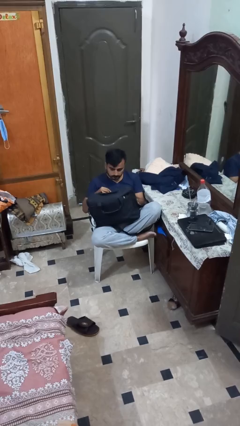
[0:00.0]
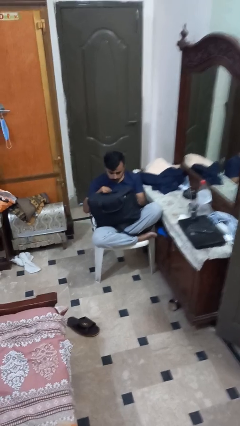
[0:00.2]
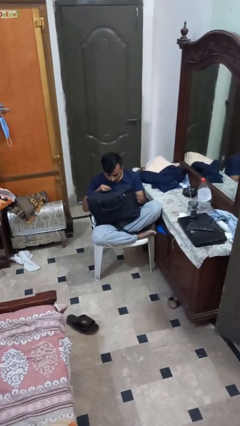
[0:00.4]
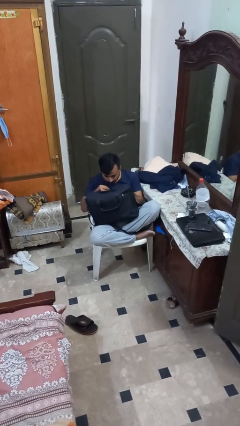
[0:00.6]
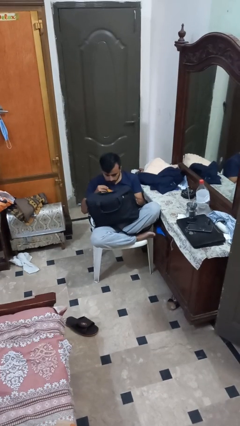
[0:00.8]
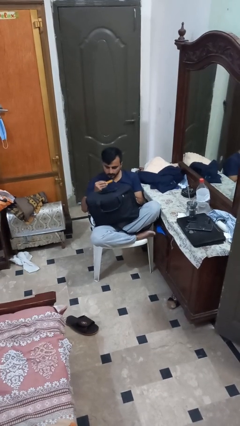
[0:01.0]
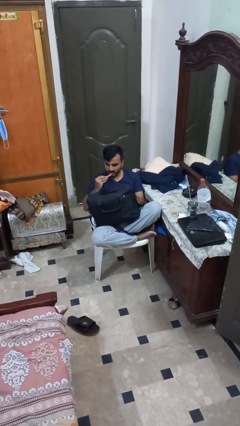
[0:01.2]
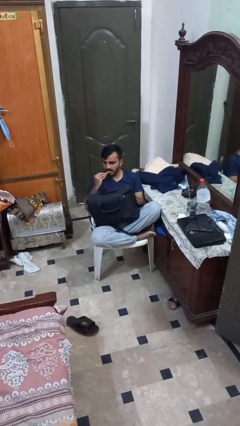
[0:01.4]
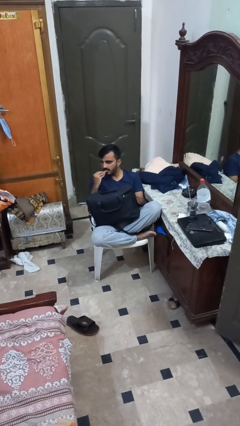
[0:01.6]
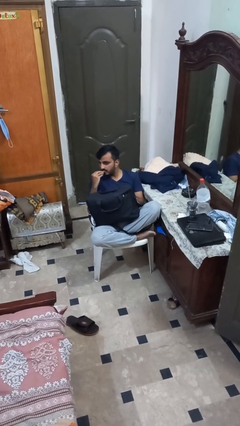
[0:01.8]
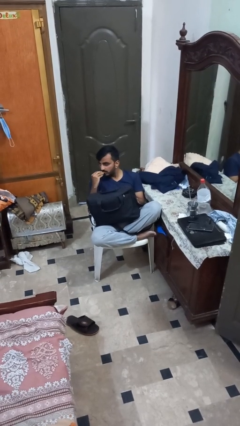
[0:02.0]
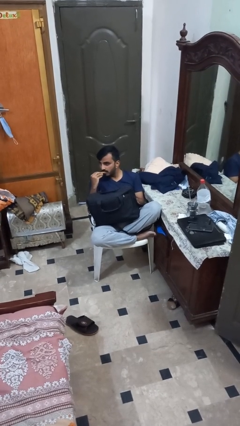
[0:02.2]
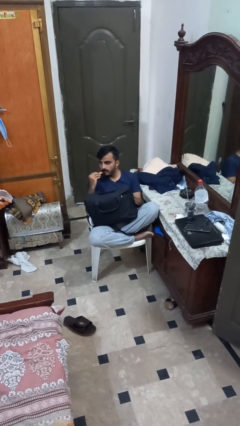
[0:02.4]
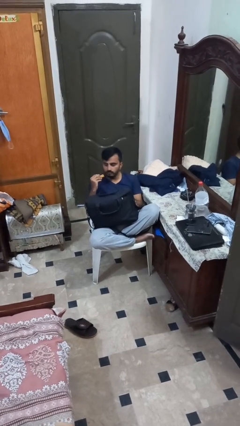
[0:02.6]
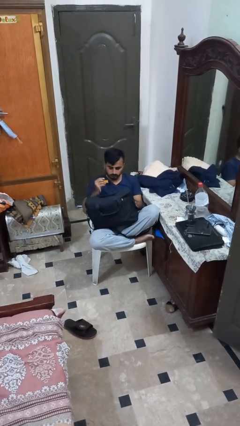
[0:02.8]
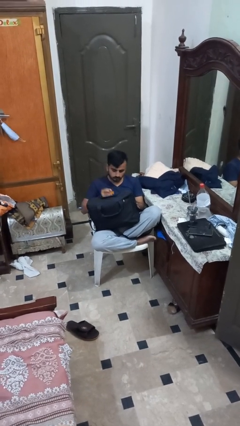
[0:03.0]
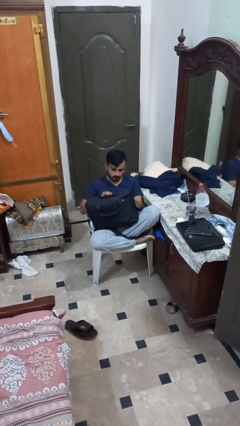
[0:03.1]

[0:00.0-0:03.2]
person eats snack from bag

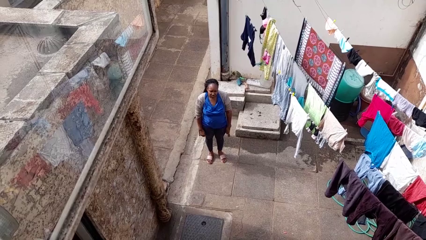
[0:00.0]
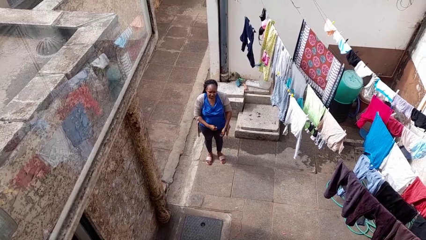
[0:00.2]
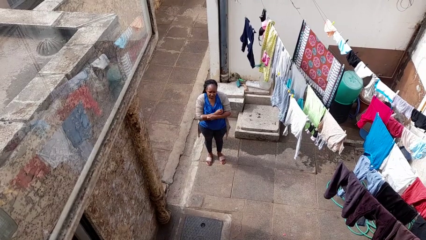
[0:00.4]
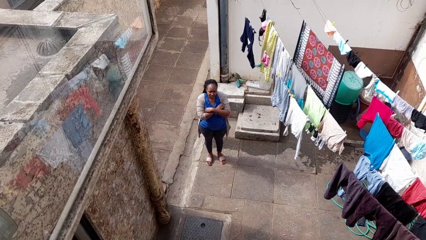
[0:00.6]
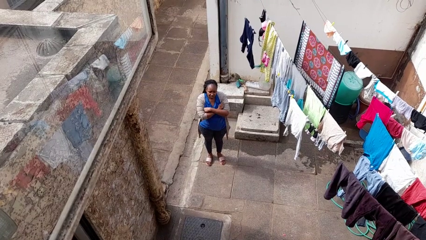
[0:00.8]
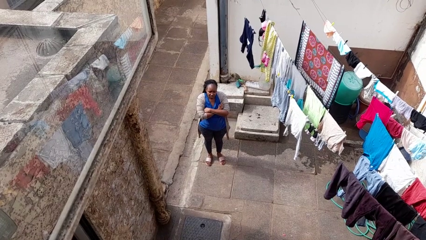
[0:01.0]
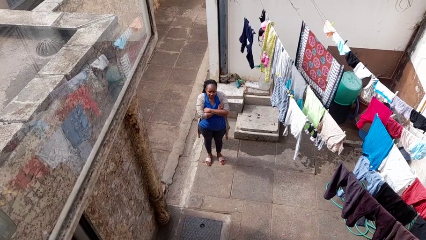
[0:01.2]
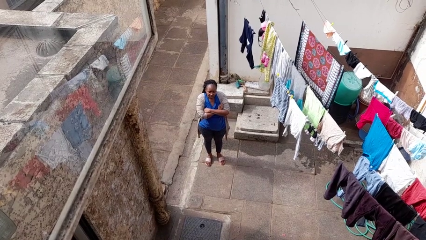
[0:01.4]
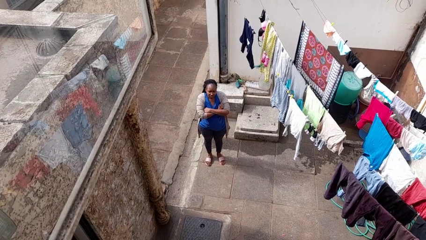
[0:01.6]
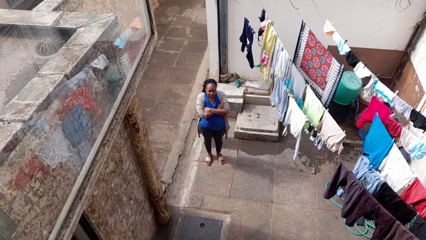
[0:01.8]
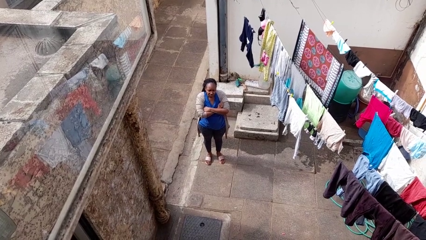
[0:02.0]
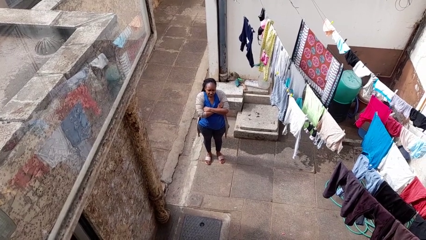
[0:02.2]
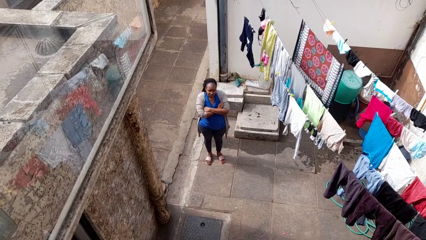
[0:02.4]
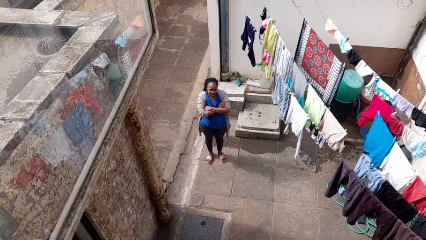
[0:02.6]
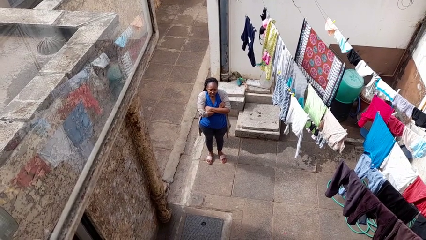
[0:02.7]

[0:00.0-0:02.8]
person gestures arms x

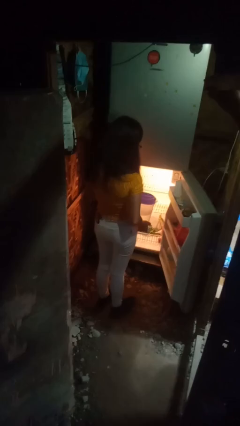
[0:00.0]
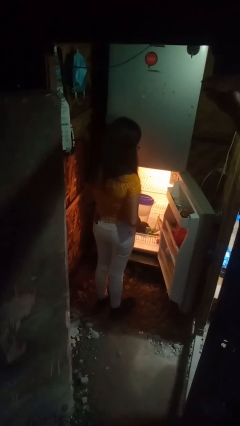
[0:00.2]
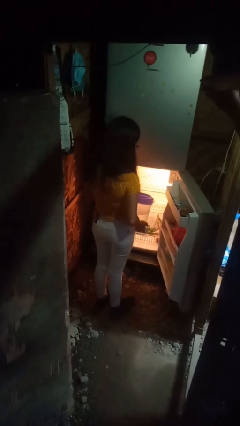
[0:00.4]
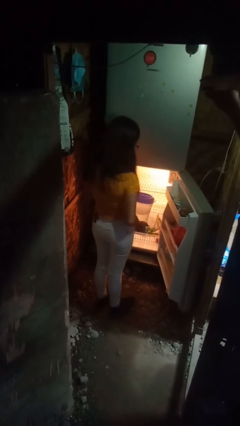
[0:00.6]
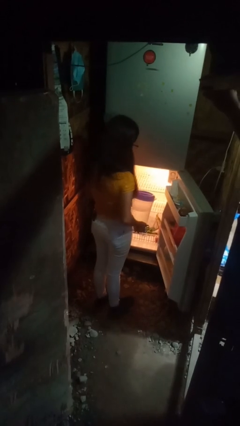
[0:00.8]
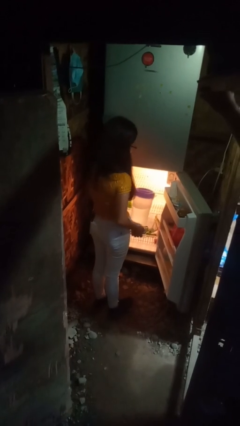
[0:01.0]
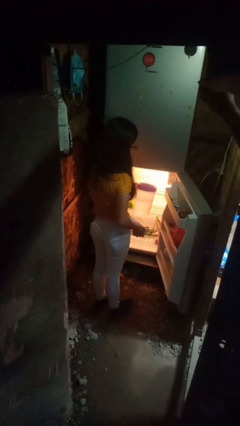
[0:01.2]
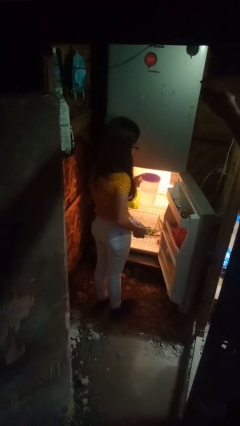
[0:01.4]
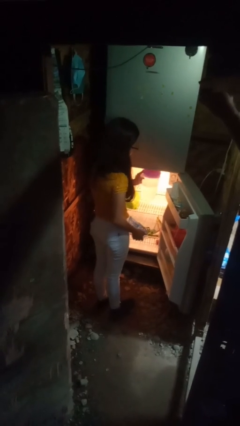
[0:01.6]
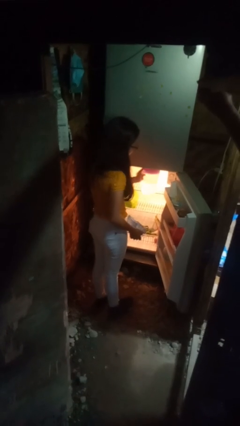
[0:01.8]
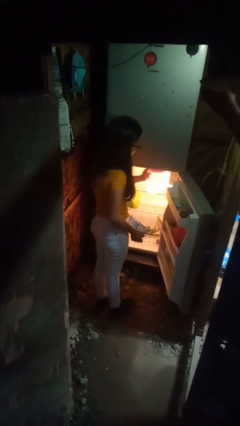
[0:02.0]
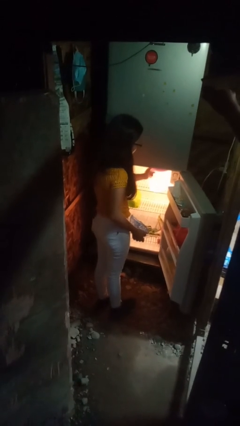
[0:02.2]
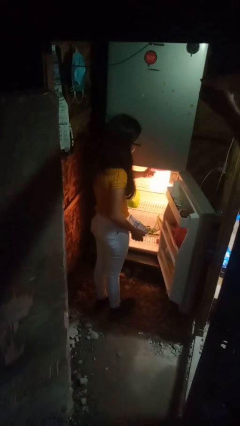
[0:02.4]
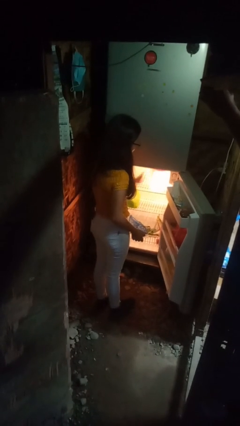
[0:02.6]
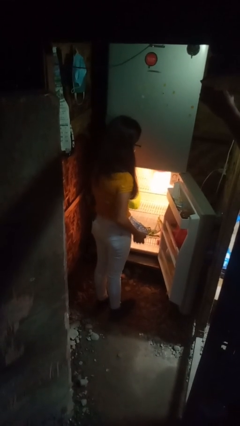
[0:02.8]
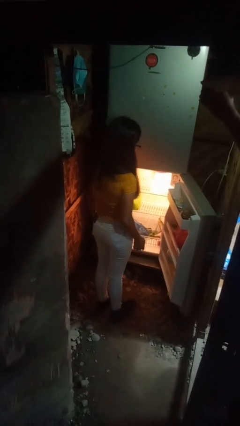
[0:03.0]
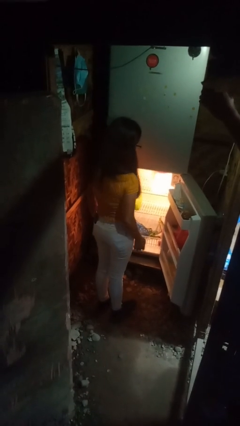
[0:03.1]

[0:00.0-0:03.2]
person puts object into refrigerator

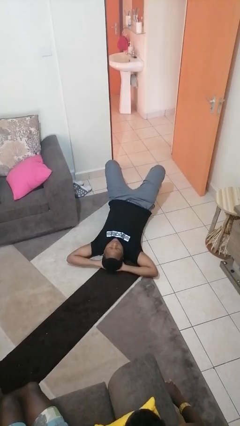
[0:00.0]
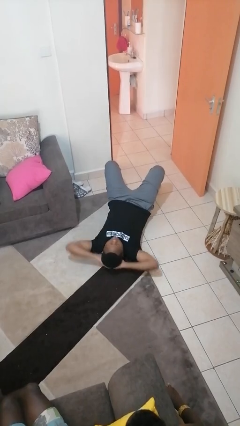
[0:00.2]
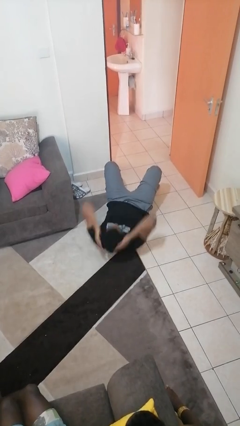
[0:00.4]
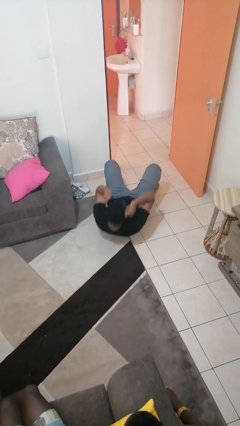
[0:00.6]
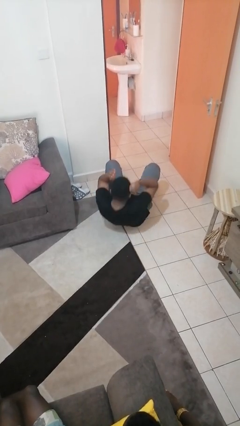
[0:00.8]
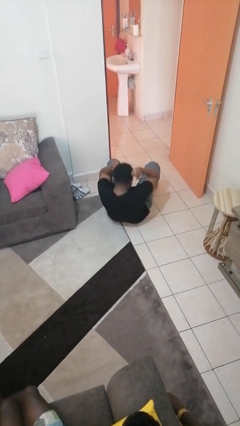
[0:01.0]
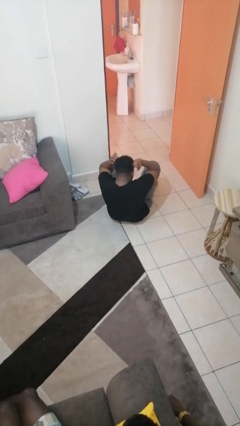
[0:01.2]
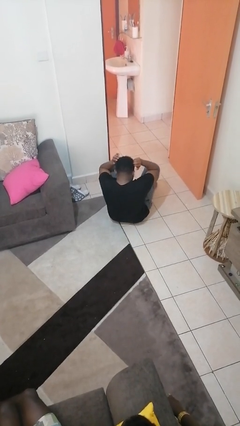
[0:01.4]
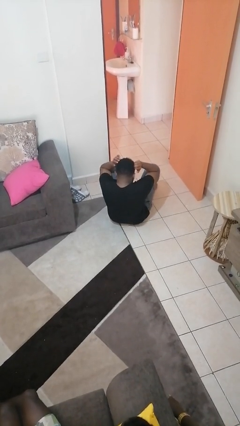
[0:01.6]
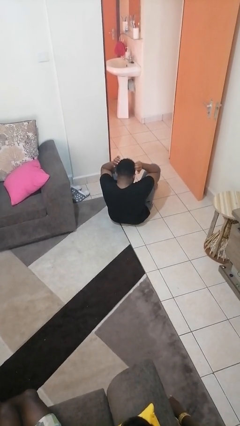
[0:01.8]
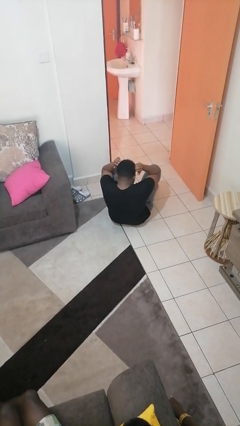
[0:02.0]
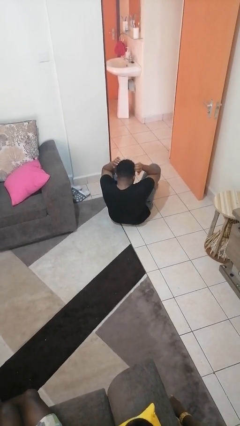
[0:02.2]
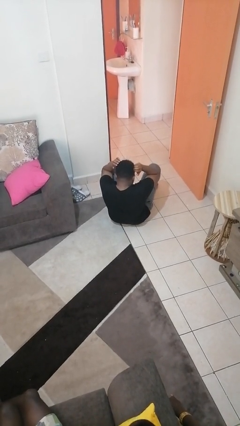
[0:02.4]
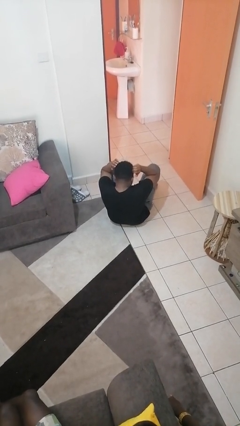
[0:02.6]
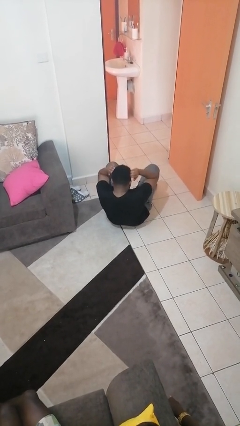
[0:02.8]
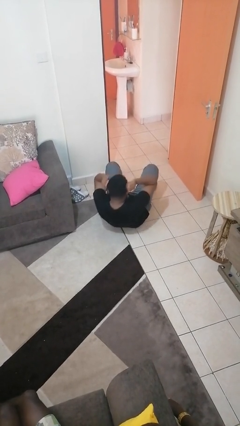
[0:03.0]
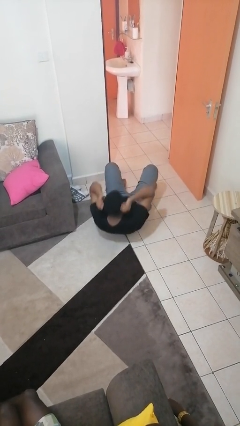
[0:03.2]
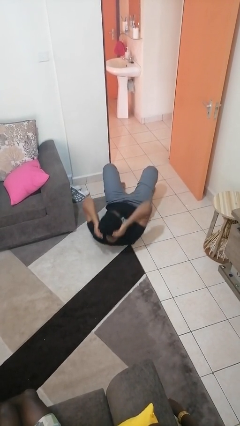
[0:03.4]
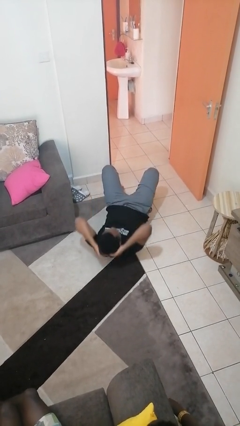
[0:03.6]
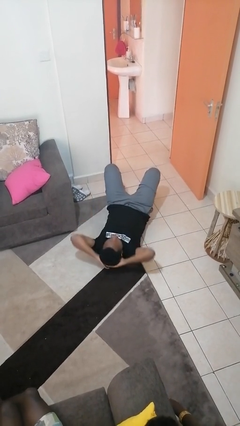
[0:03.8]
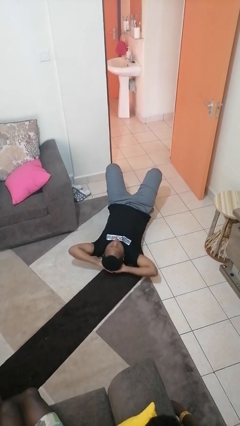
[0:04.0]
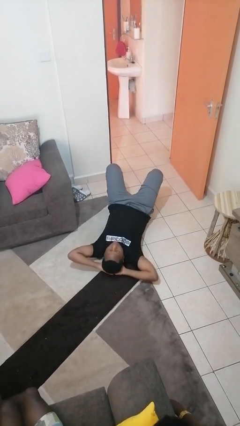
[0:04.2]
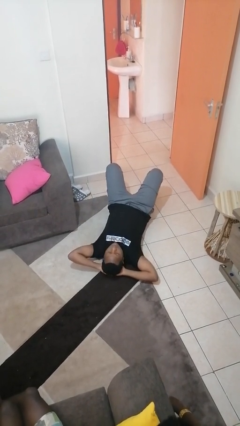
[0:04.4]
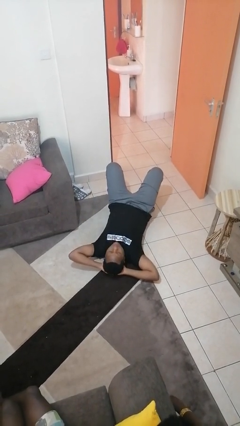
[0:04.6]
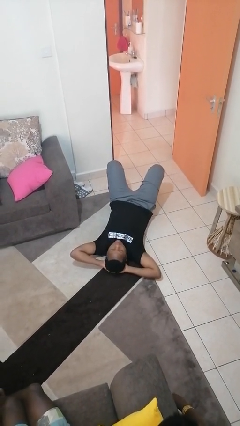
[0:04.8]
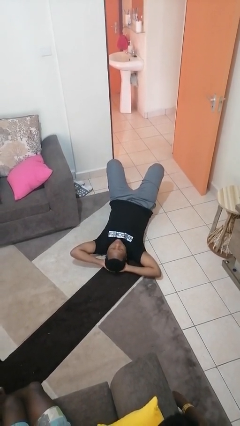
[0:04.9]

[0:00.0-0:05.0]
person exercises with situp

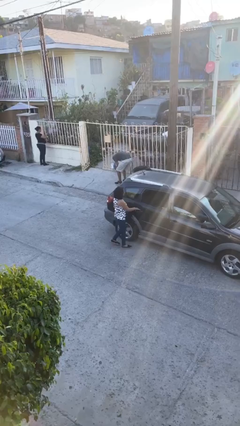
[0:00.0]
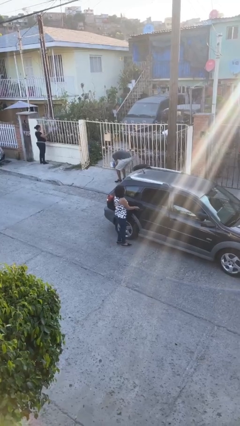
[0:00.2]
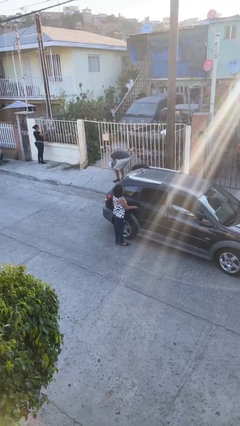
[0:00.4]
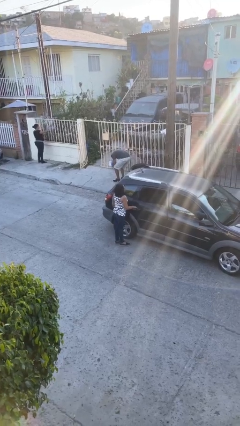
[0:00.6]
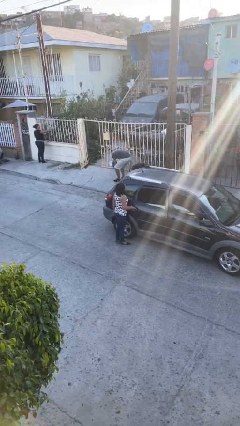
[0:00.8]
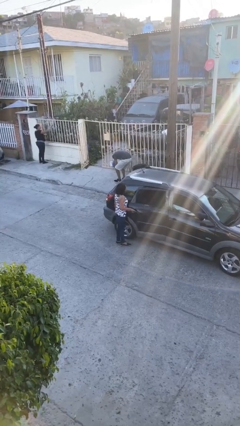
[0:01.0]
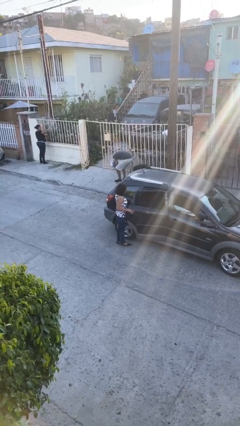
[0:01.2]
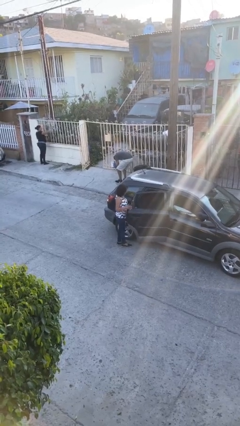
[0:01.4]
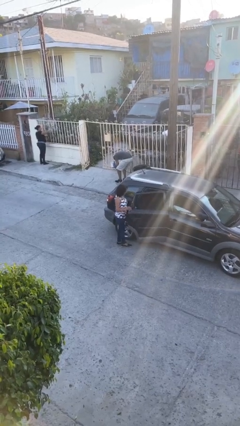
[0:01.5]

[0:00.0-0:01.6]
person opens car door

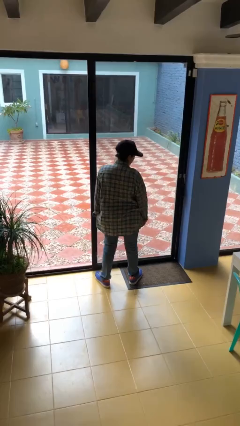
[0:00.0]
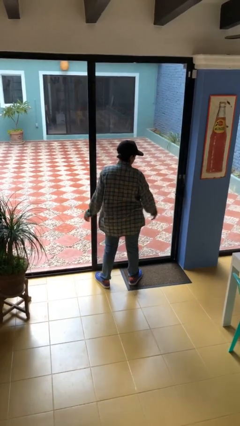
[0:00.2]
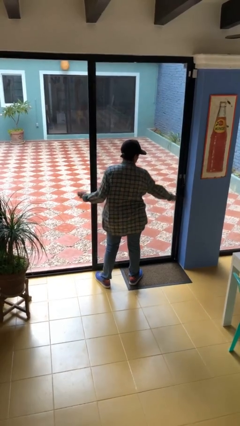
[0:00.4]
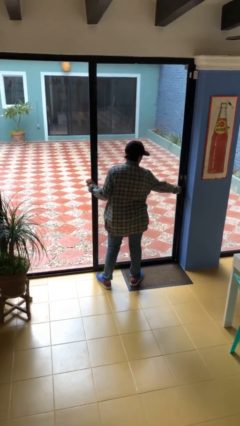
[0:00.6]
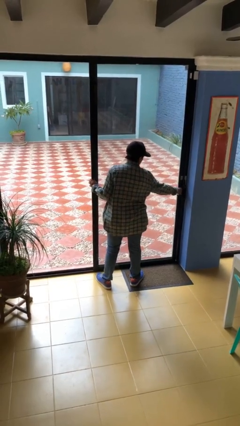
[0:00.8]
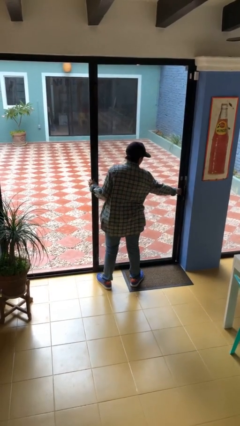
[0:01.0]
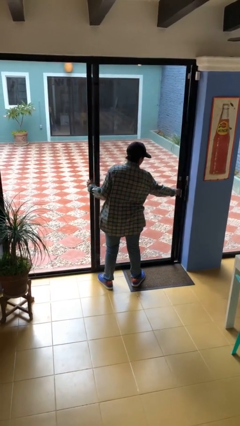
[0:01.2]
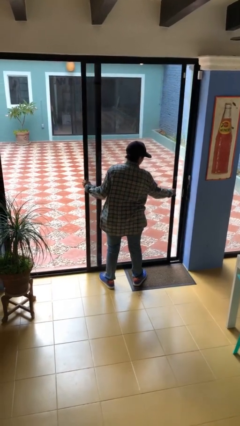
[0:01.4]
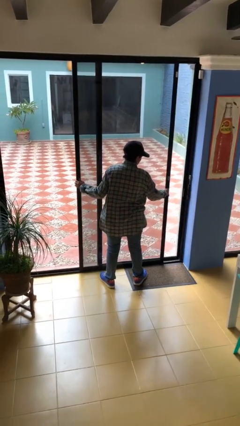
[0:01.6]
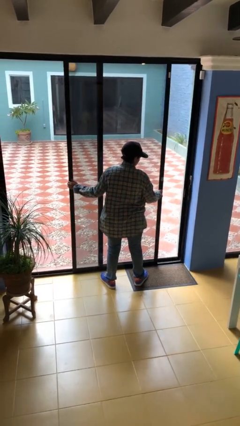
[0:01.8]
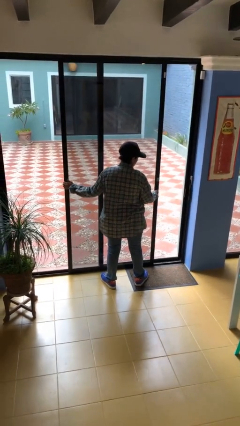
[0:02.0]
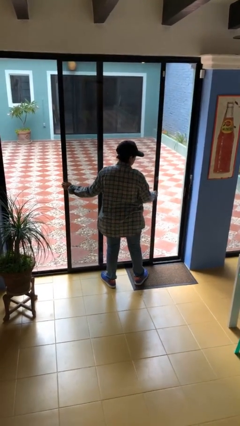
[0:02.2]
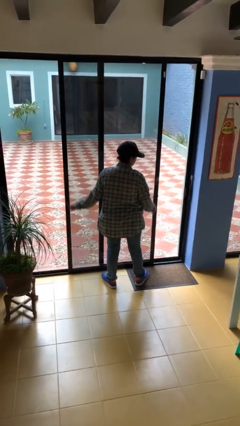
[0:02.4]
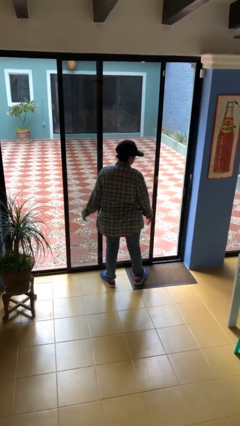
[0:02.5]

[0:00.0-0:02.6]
person opens sliding door
